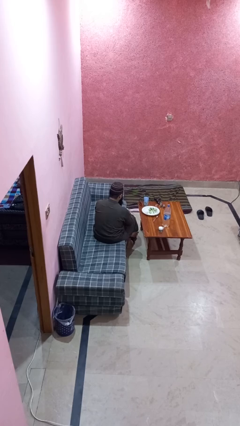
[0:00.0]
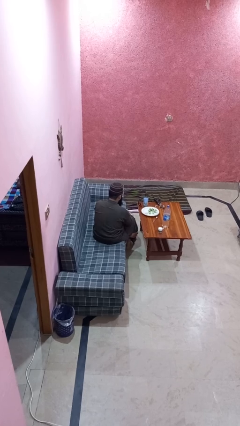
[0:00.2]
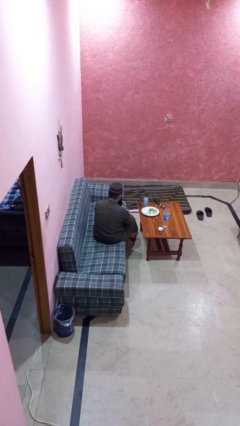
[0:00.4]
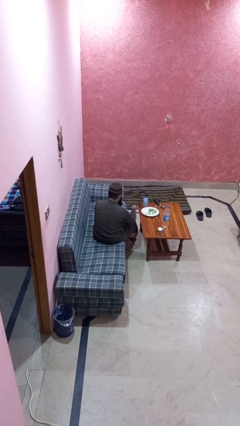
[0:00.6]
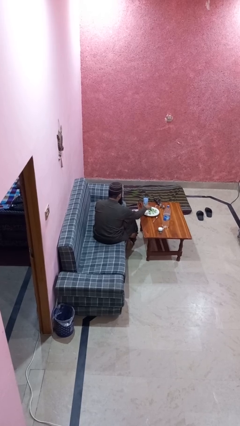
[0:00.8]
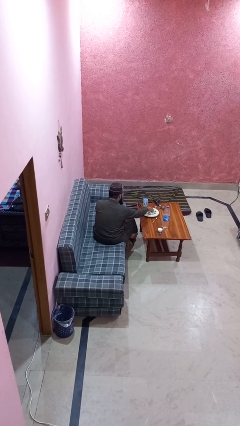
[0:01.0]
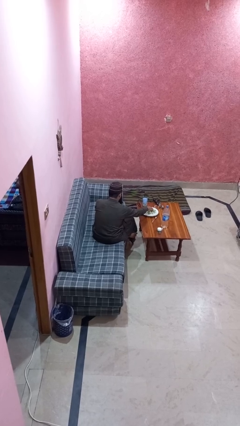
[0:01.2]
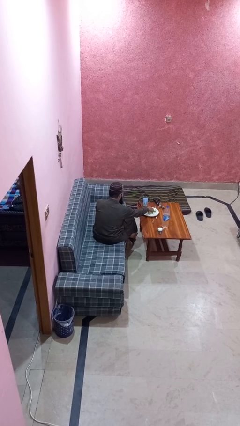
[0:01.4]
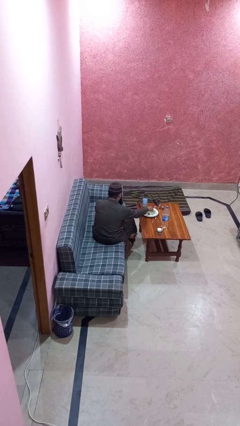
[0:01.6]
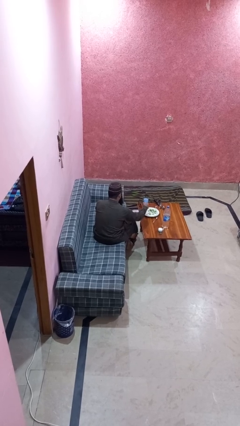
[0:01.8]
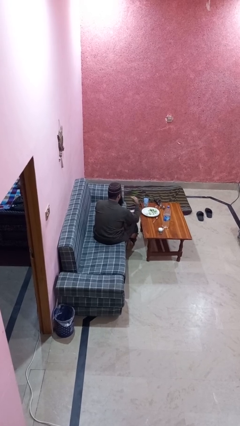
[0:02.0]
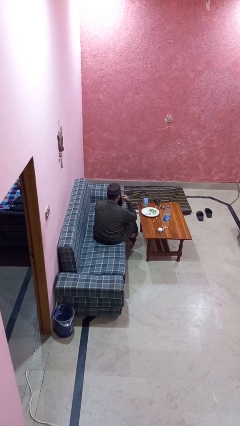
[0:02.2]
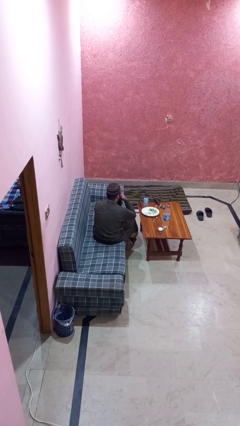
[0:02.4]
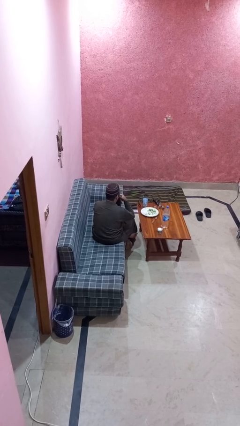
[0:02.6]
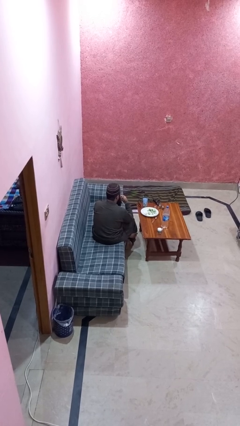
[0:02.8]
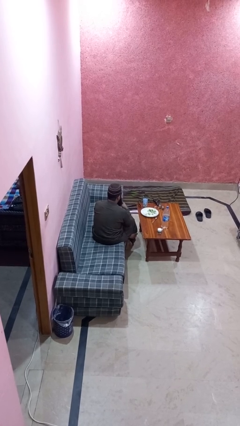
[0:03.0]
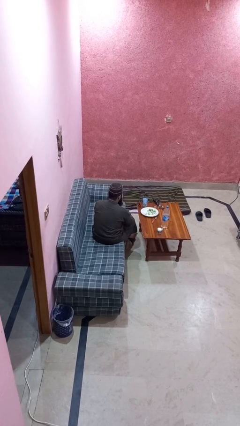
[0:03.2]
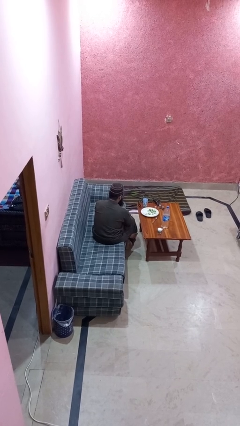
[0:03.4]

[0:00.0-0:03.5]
person eats with hands

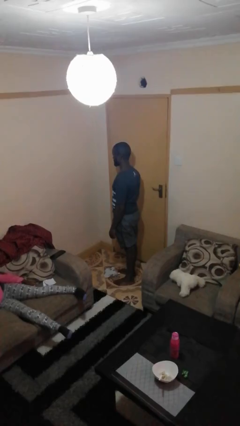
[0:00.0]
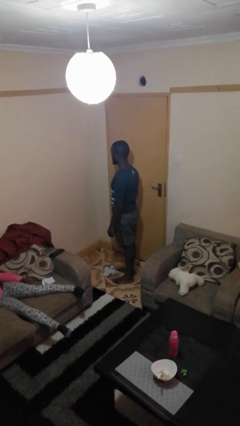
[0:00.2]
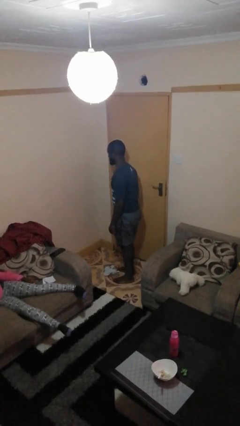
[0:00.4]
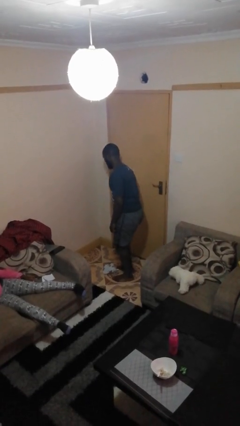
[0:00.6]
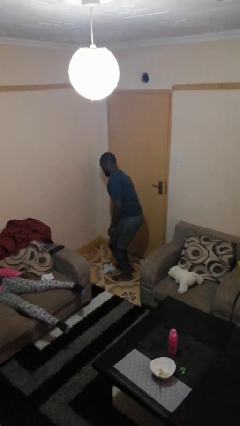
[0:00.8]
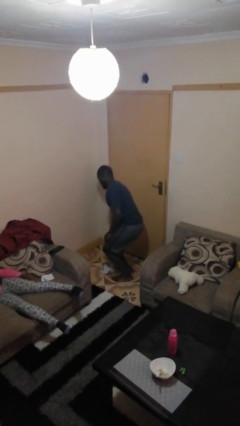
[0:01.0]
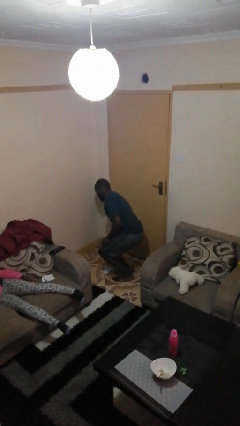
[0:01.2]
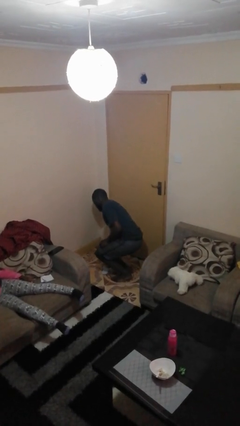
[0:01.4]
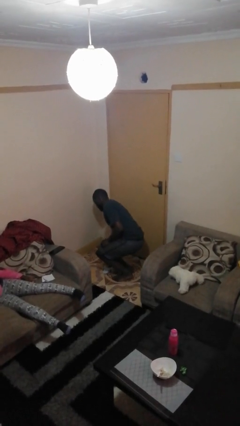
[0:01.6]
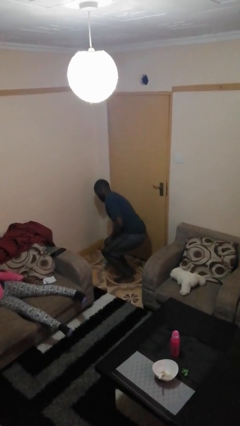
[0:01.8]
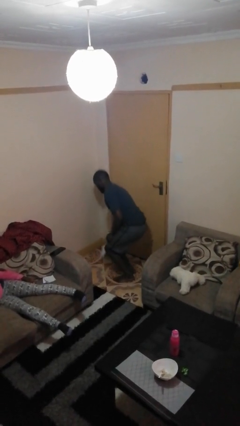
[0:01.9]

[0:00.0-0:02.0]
person picks up object from floor

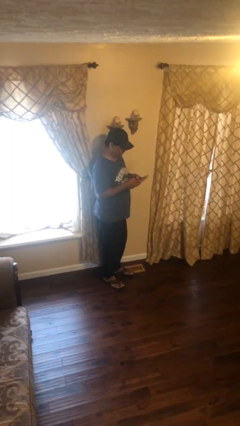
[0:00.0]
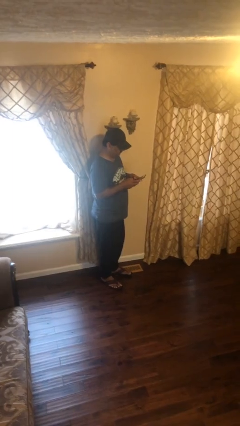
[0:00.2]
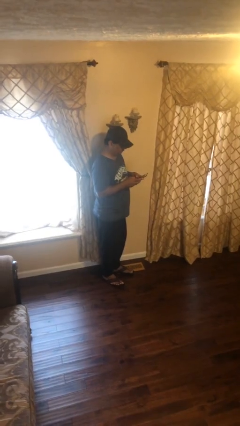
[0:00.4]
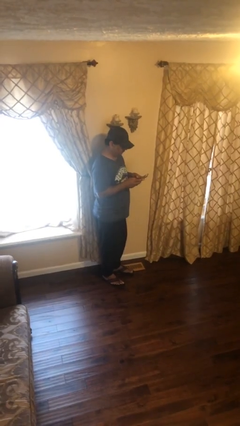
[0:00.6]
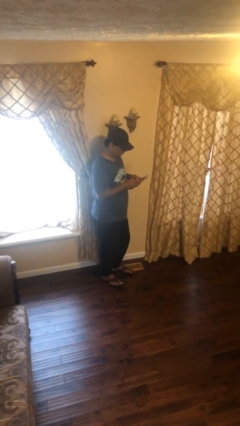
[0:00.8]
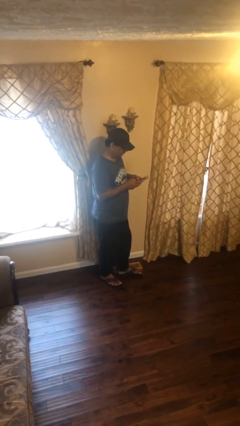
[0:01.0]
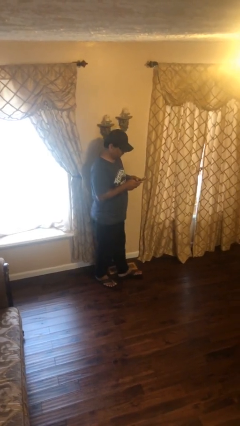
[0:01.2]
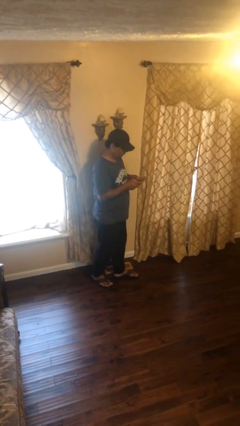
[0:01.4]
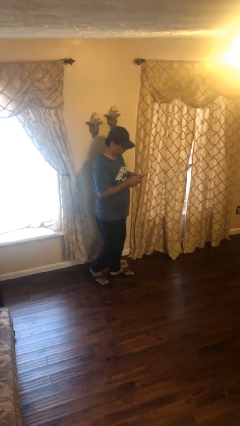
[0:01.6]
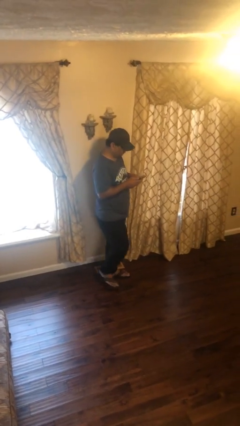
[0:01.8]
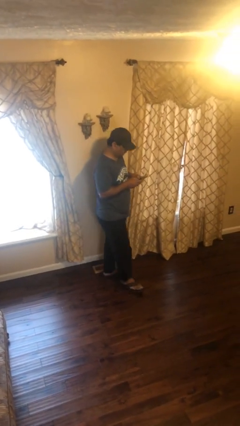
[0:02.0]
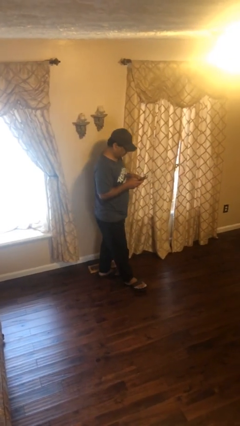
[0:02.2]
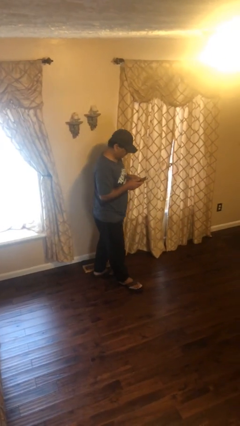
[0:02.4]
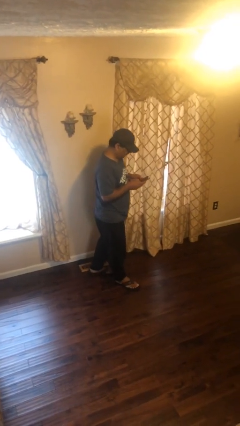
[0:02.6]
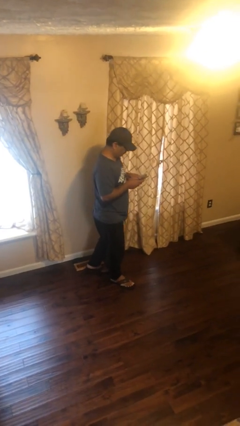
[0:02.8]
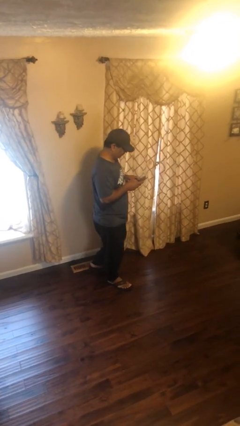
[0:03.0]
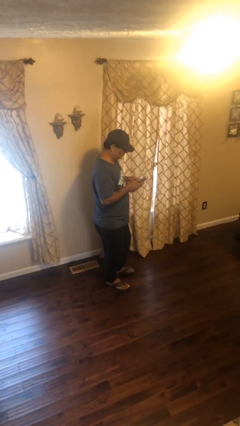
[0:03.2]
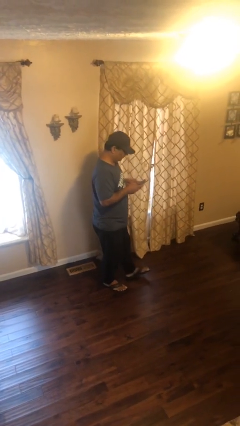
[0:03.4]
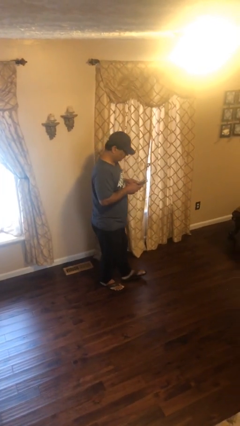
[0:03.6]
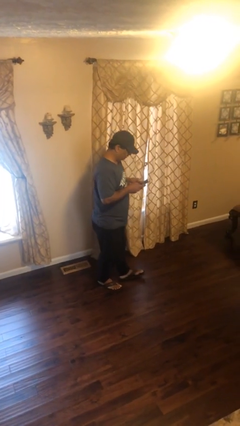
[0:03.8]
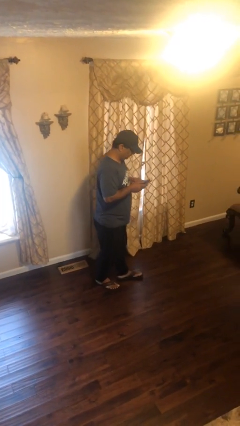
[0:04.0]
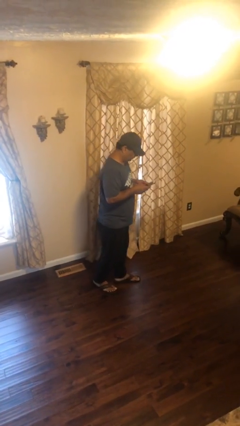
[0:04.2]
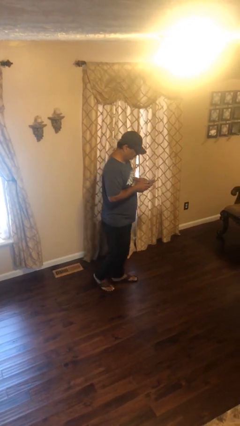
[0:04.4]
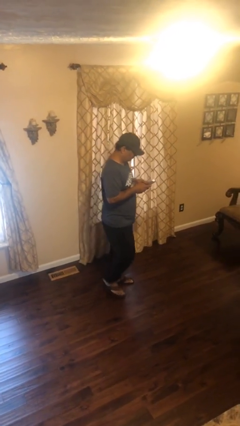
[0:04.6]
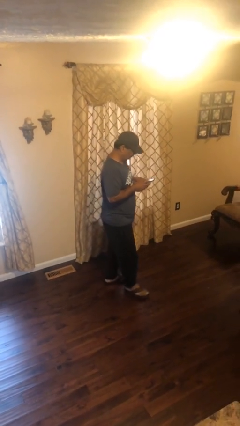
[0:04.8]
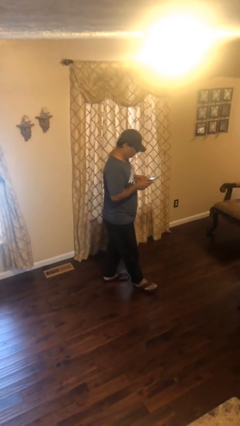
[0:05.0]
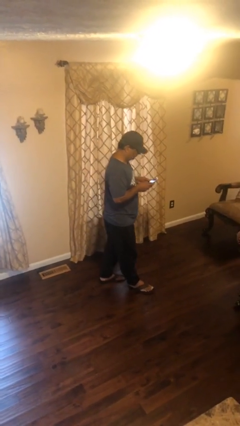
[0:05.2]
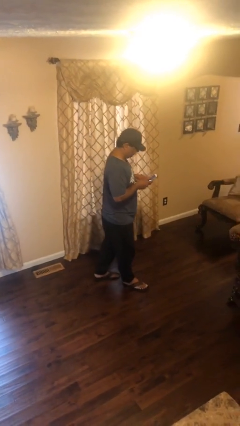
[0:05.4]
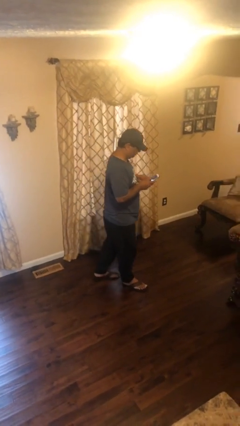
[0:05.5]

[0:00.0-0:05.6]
person texts on phone

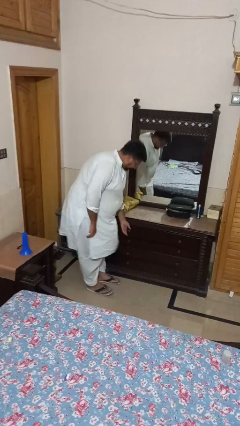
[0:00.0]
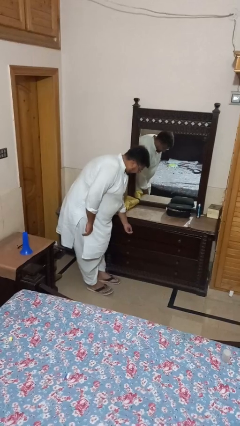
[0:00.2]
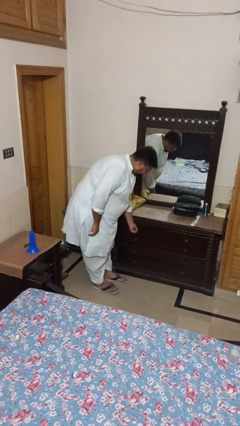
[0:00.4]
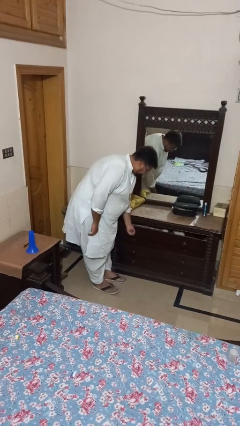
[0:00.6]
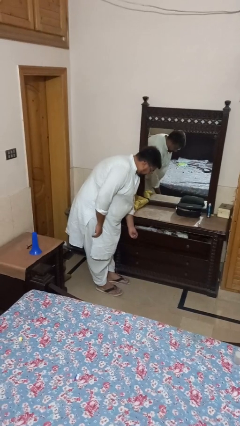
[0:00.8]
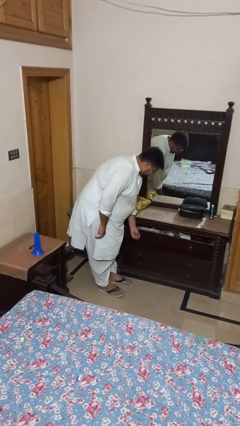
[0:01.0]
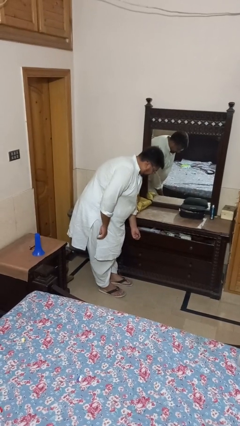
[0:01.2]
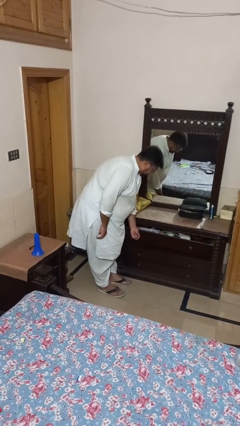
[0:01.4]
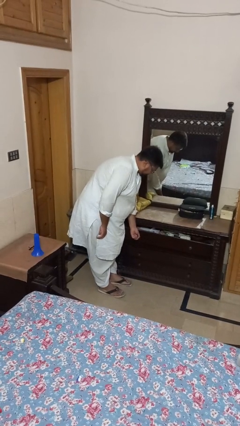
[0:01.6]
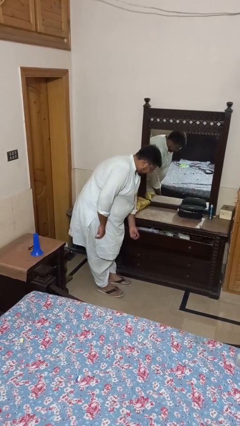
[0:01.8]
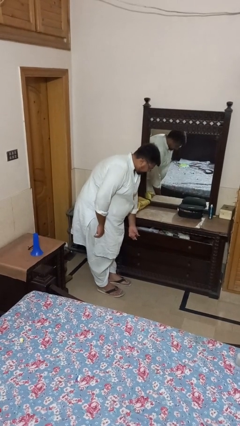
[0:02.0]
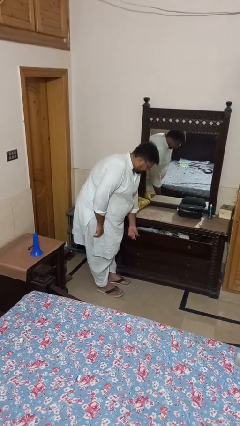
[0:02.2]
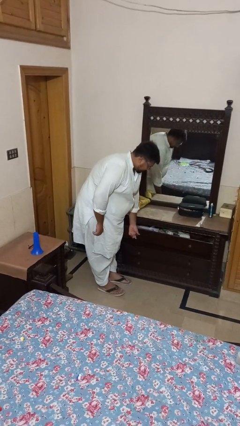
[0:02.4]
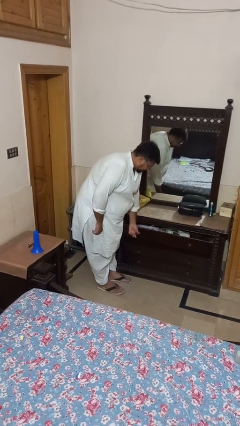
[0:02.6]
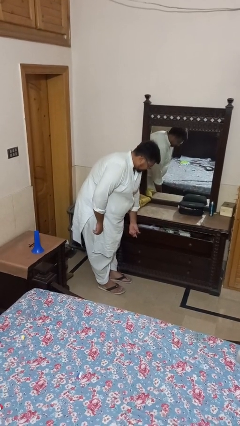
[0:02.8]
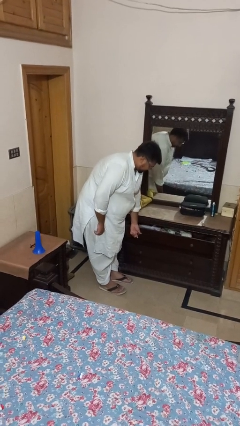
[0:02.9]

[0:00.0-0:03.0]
person opens dresser drawer

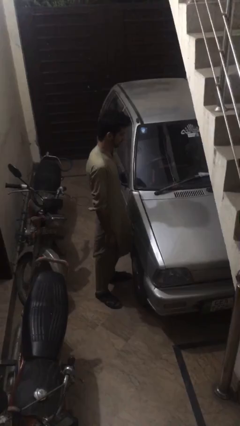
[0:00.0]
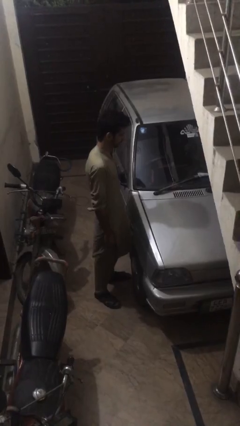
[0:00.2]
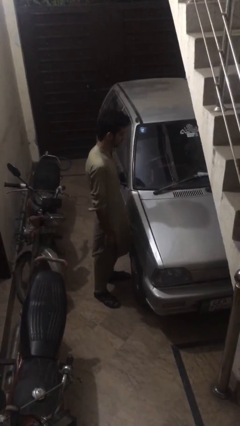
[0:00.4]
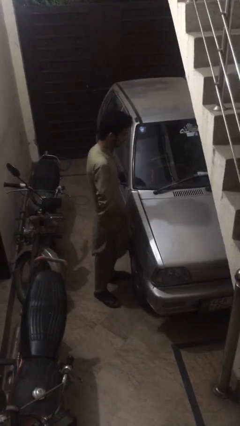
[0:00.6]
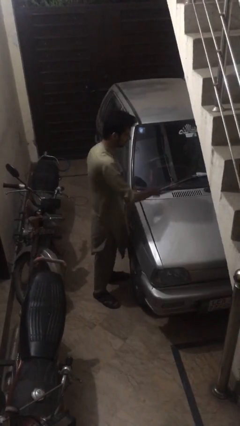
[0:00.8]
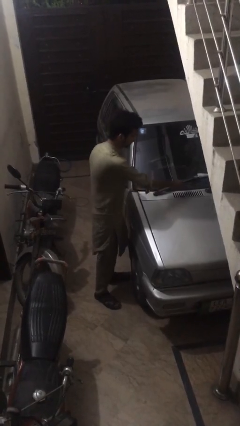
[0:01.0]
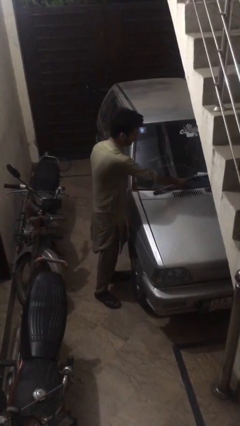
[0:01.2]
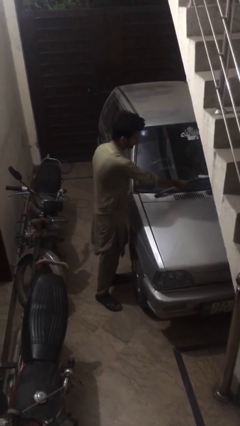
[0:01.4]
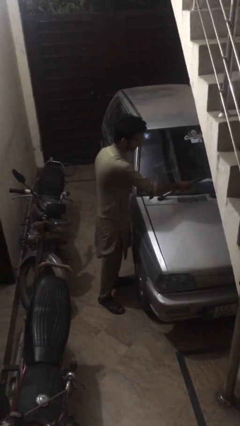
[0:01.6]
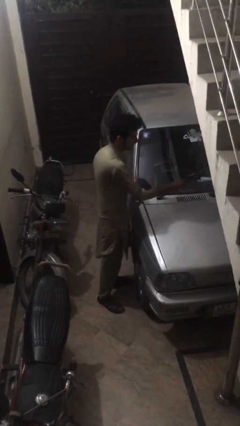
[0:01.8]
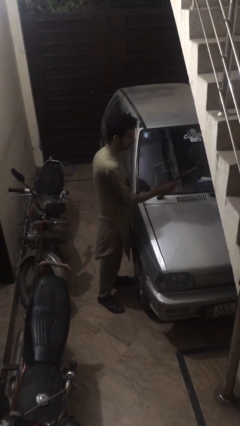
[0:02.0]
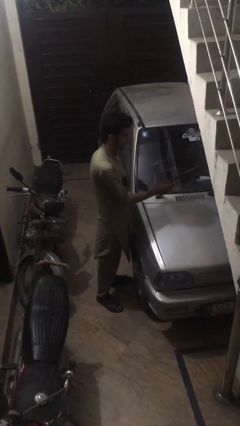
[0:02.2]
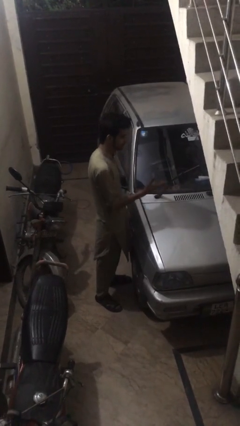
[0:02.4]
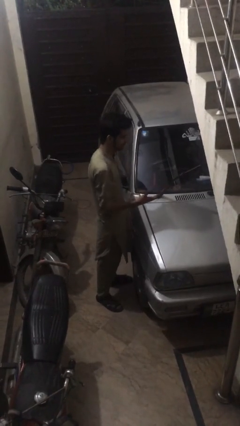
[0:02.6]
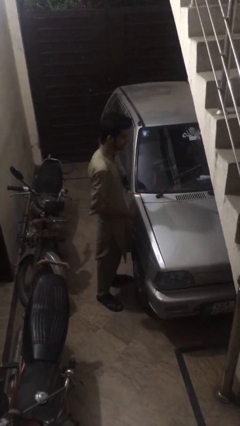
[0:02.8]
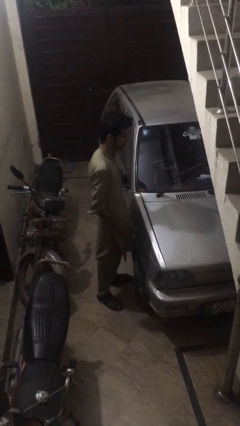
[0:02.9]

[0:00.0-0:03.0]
person flips up car wipers

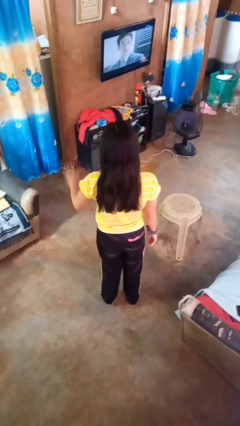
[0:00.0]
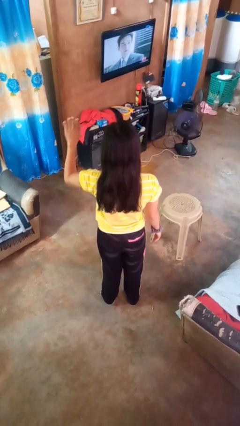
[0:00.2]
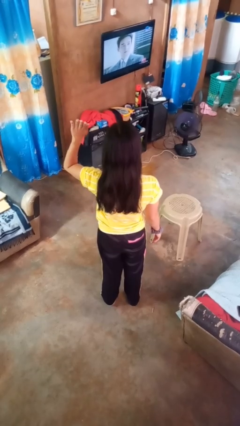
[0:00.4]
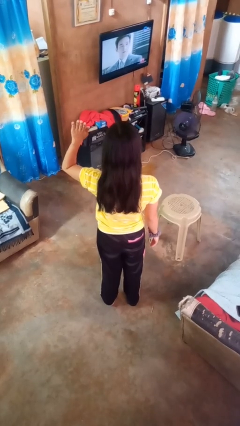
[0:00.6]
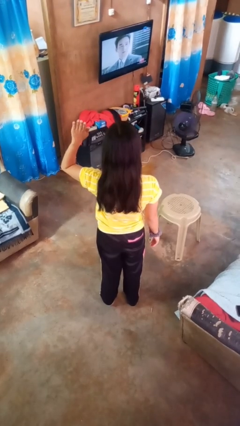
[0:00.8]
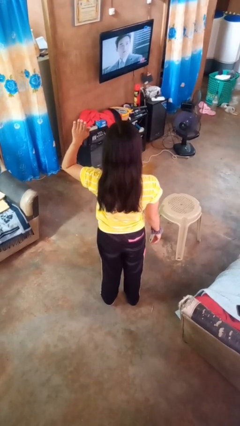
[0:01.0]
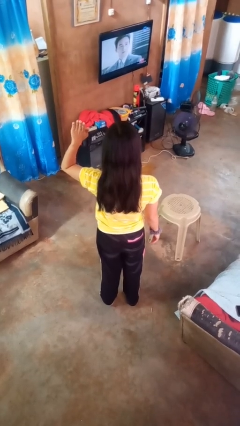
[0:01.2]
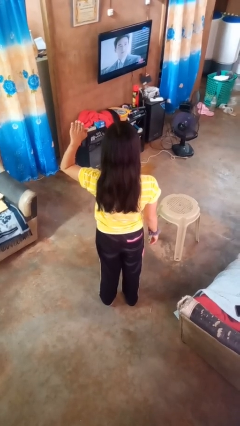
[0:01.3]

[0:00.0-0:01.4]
person gestures number five
